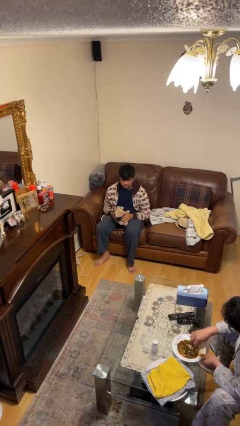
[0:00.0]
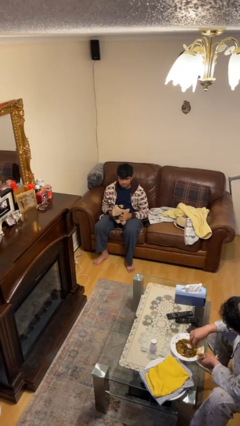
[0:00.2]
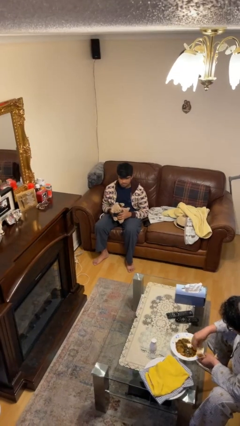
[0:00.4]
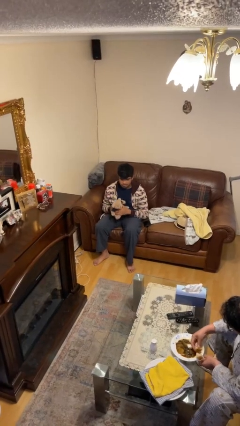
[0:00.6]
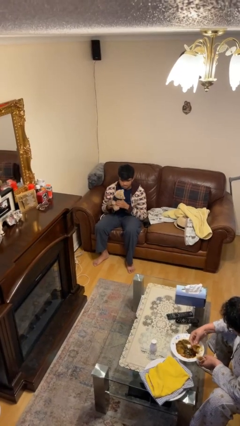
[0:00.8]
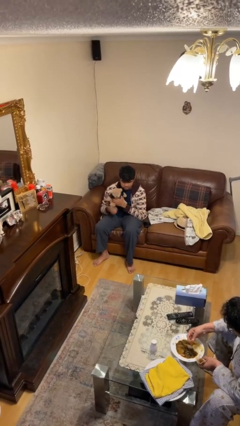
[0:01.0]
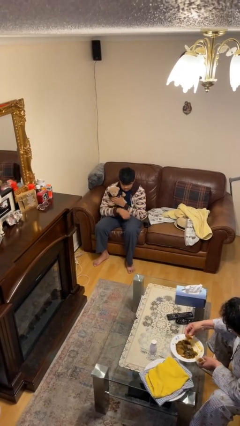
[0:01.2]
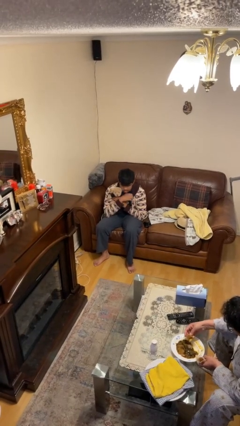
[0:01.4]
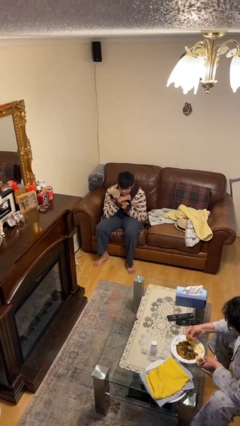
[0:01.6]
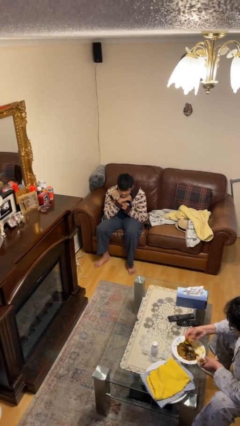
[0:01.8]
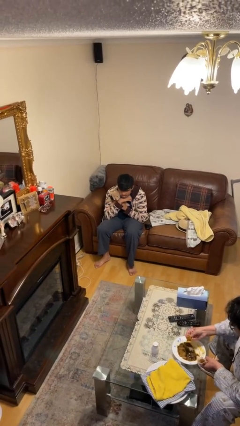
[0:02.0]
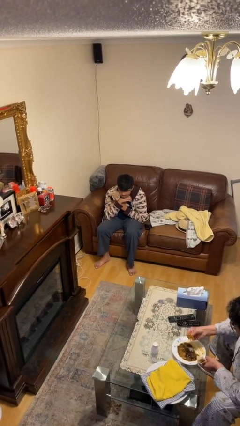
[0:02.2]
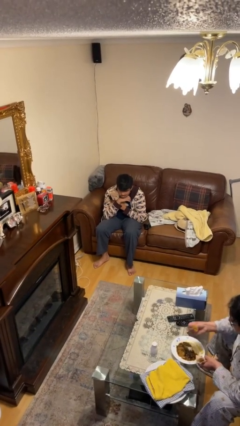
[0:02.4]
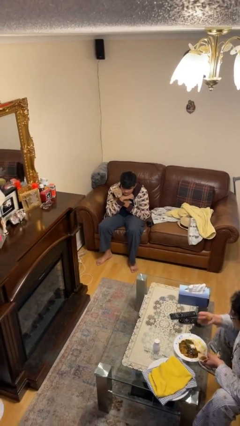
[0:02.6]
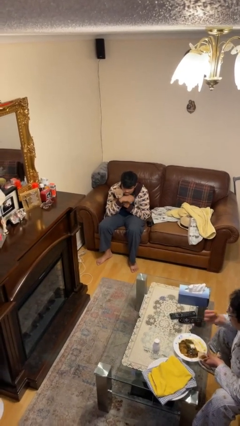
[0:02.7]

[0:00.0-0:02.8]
person hugs stuffed animal

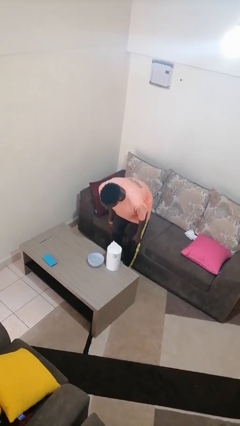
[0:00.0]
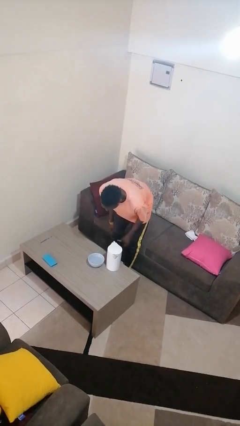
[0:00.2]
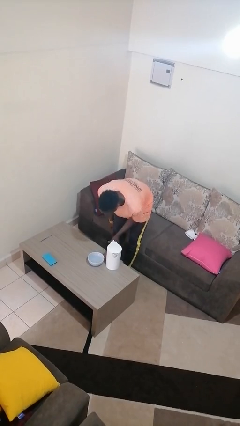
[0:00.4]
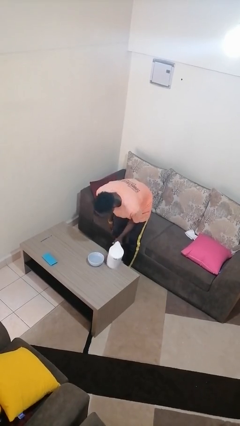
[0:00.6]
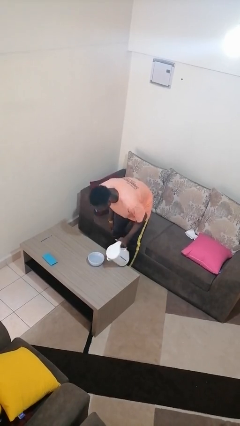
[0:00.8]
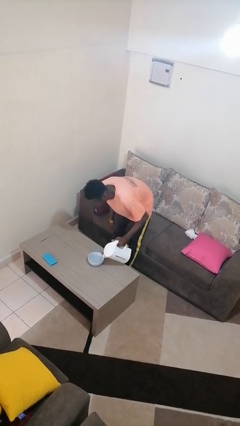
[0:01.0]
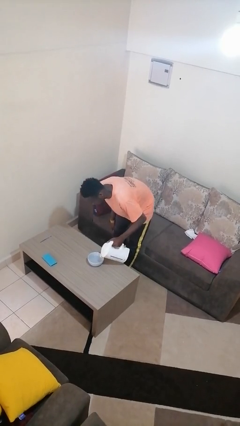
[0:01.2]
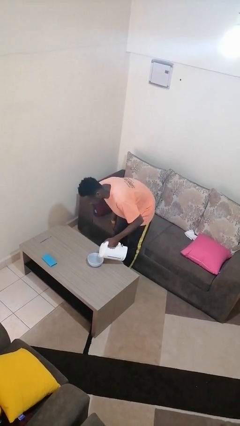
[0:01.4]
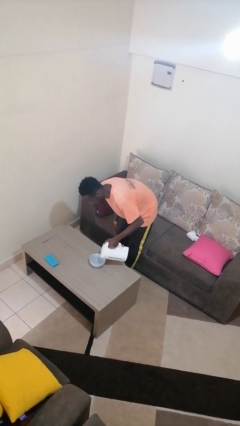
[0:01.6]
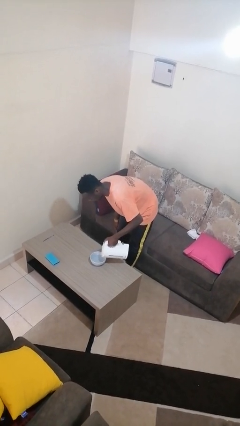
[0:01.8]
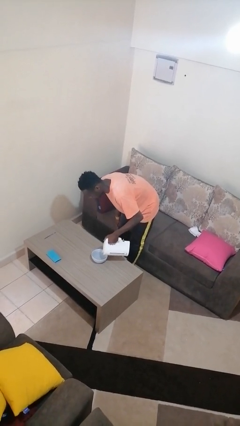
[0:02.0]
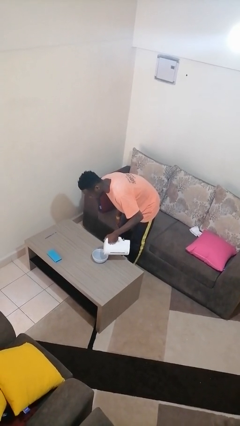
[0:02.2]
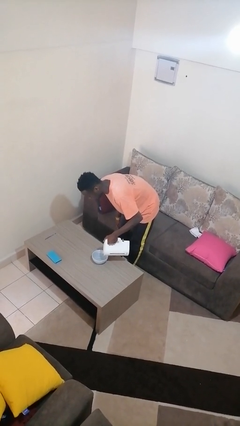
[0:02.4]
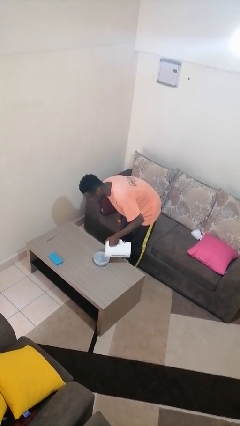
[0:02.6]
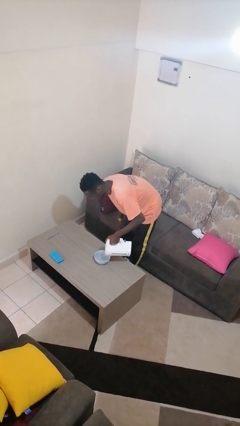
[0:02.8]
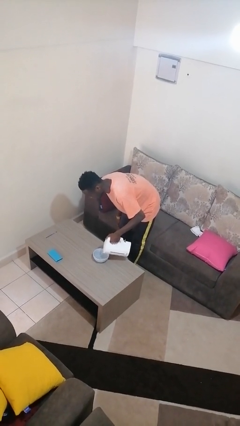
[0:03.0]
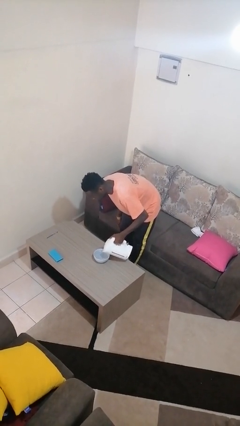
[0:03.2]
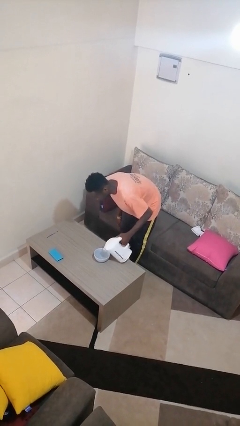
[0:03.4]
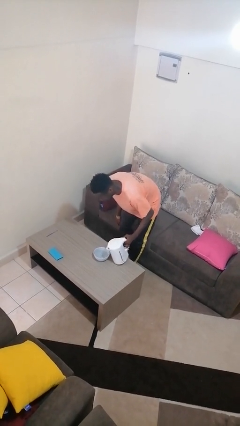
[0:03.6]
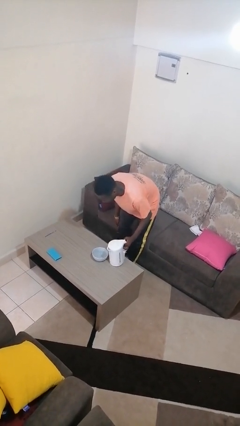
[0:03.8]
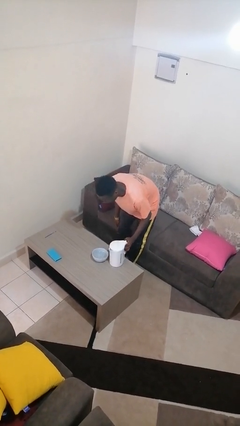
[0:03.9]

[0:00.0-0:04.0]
person pours into bowl

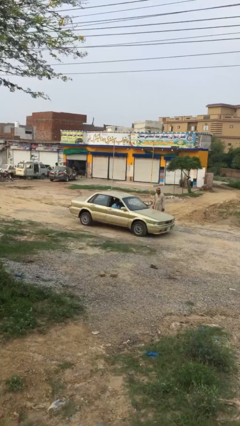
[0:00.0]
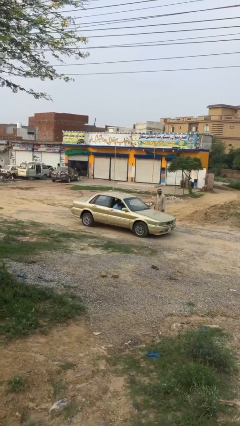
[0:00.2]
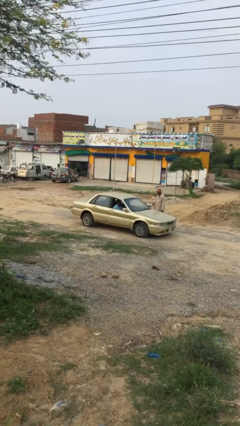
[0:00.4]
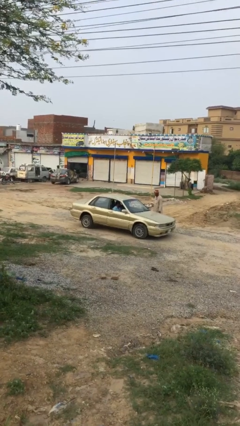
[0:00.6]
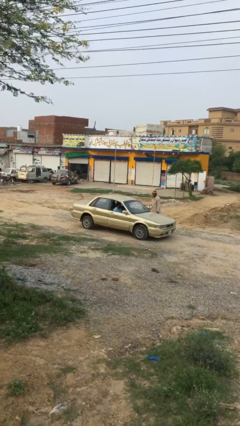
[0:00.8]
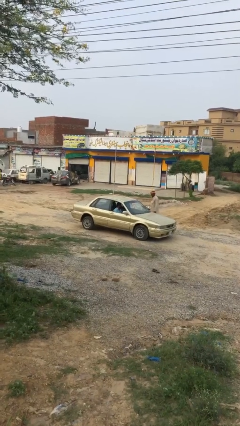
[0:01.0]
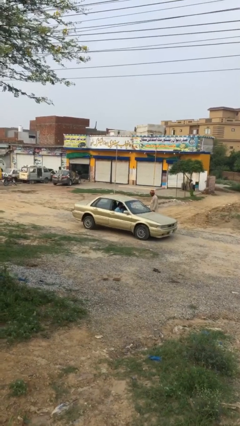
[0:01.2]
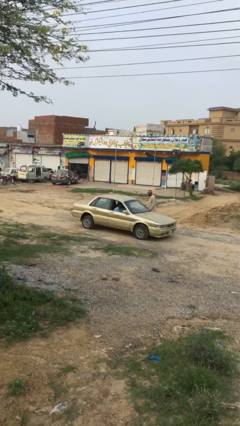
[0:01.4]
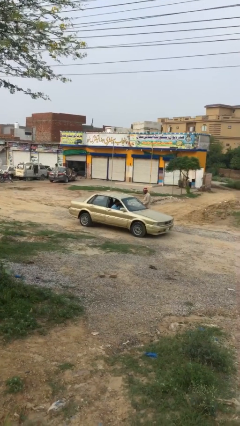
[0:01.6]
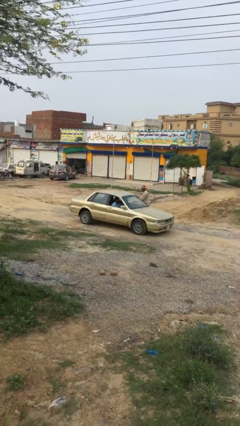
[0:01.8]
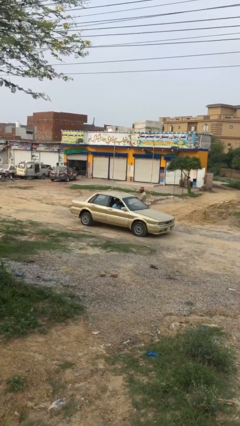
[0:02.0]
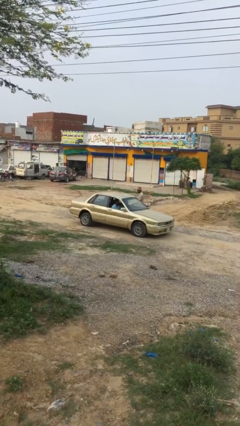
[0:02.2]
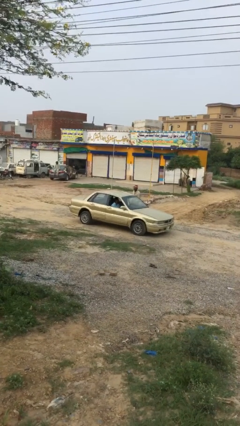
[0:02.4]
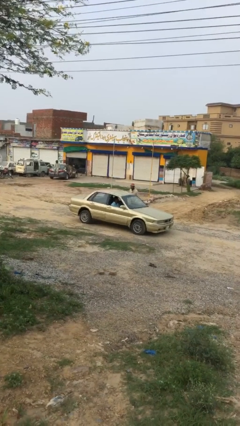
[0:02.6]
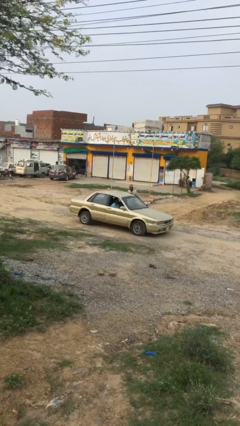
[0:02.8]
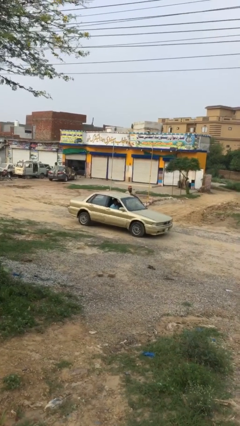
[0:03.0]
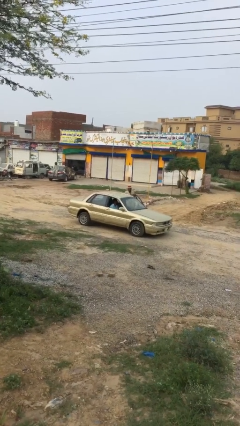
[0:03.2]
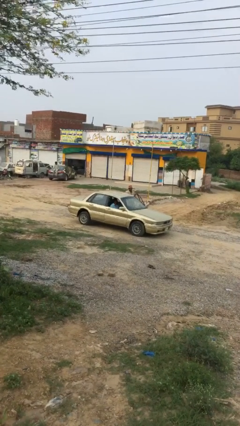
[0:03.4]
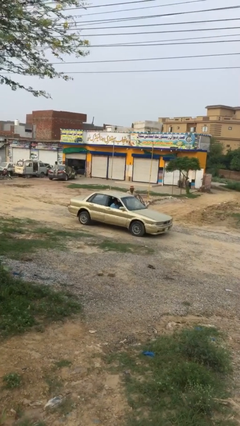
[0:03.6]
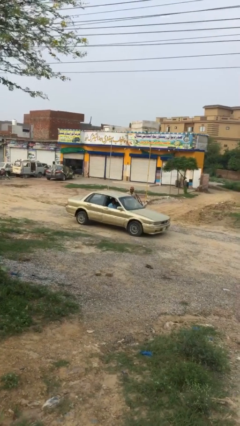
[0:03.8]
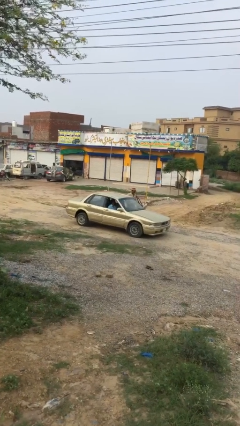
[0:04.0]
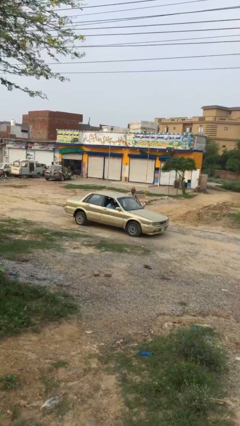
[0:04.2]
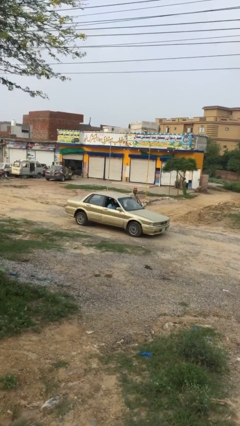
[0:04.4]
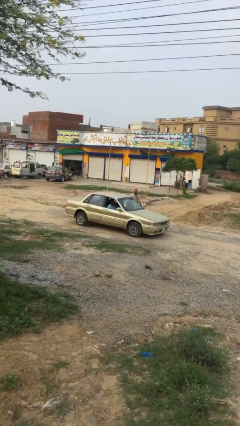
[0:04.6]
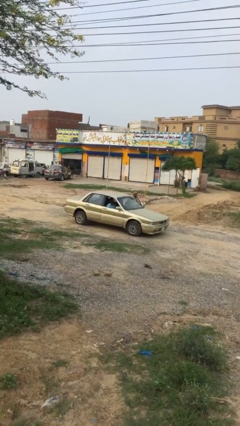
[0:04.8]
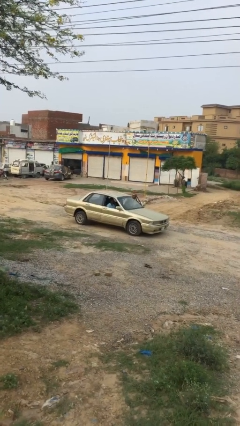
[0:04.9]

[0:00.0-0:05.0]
car picks up person

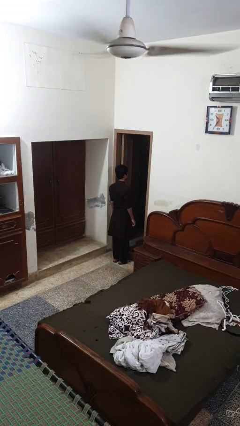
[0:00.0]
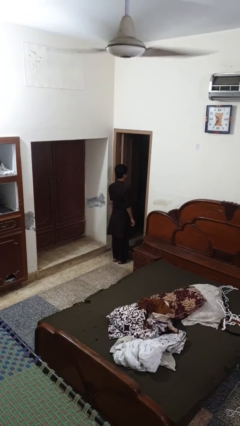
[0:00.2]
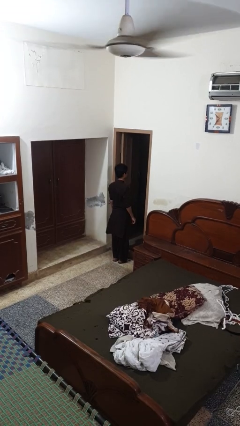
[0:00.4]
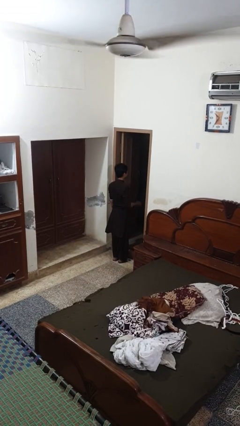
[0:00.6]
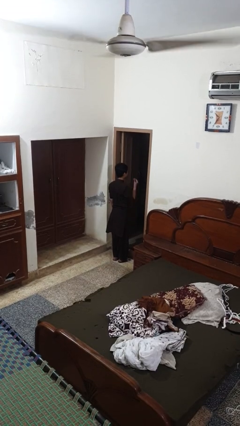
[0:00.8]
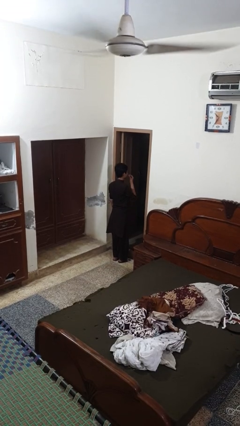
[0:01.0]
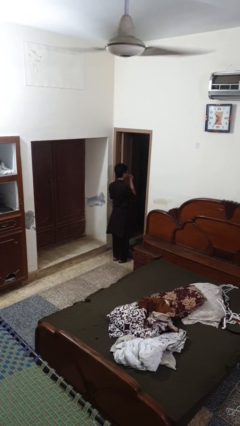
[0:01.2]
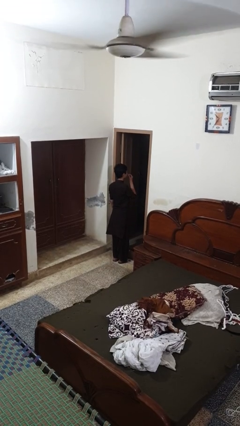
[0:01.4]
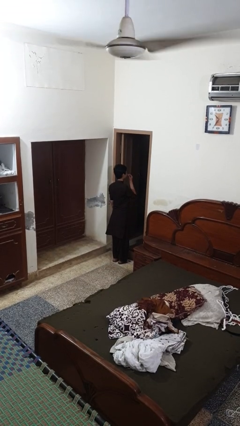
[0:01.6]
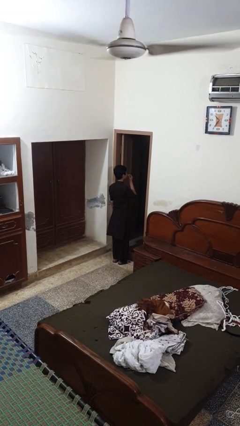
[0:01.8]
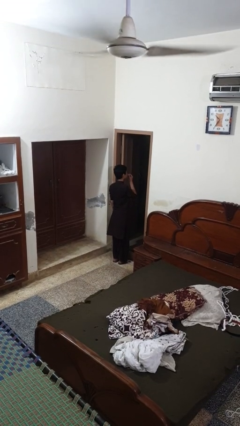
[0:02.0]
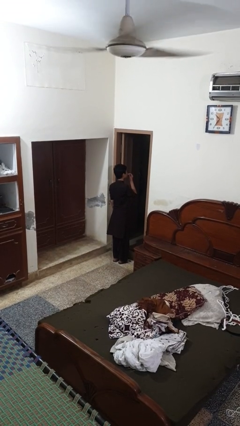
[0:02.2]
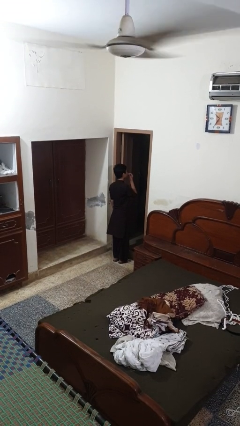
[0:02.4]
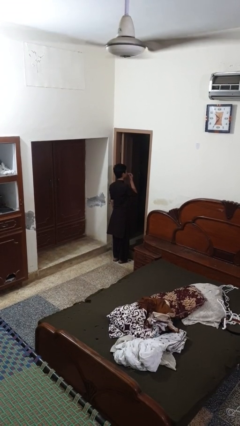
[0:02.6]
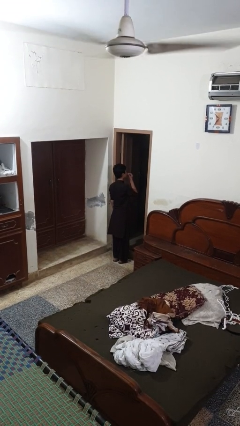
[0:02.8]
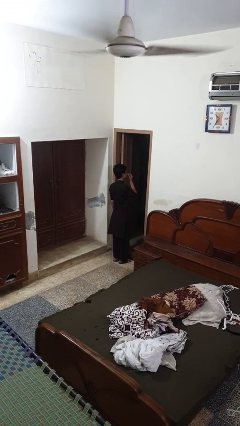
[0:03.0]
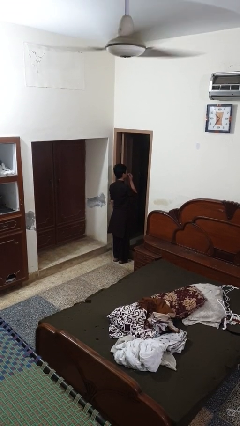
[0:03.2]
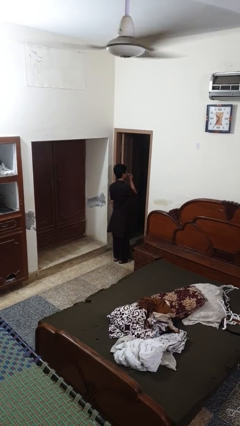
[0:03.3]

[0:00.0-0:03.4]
person flosses

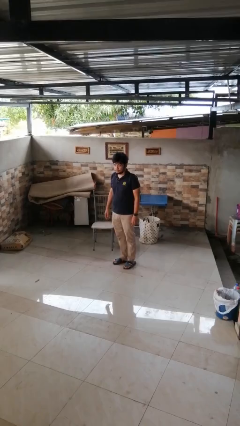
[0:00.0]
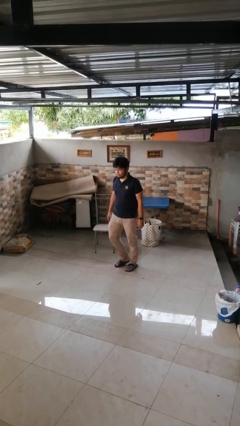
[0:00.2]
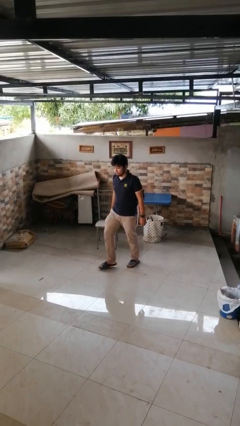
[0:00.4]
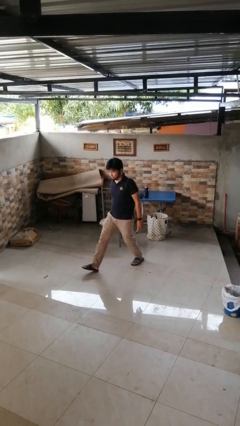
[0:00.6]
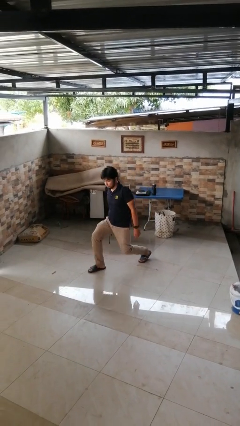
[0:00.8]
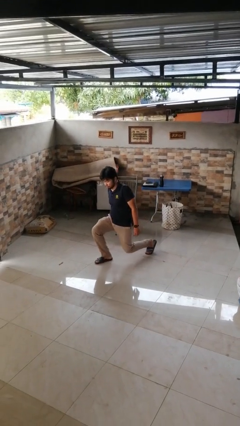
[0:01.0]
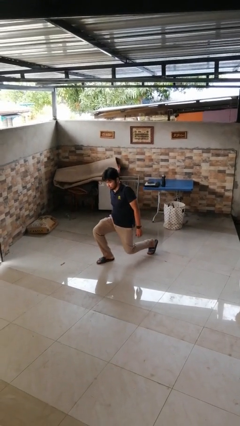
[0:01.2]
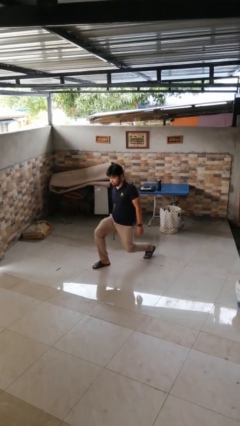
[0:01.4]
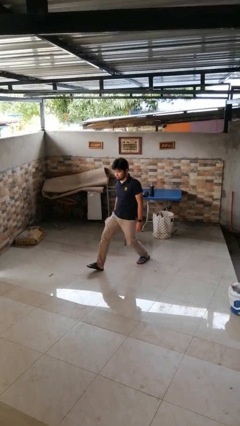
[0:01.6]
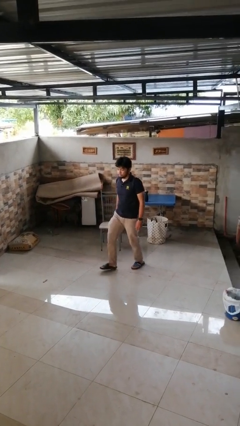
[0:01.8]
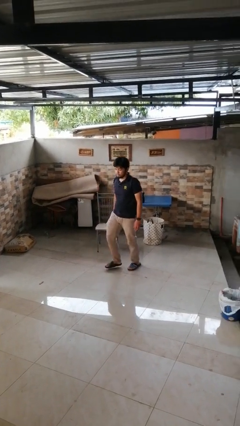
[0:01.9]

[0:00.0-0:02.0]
person exercises with lunges

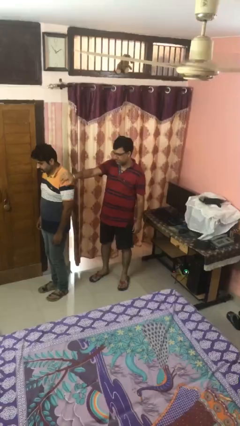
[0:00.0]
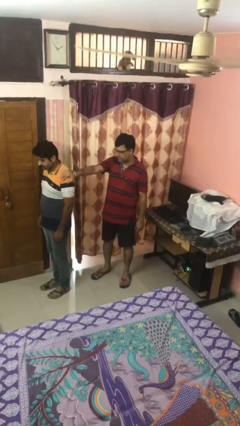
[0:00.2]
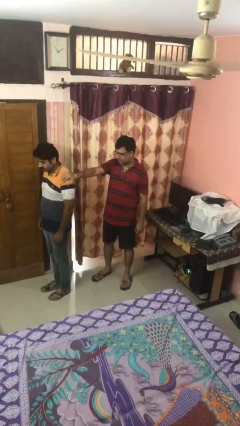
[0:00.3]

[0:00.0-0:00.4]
person grabs person by shoulder
